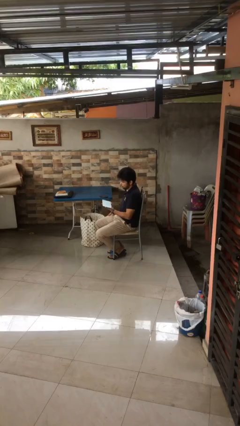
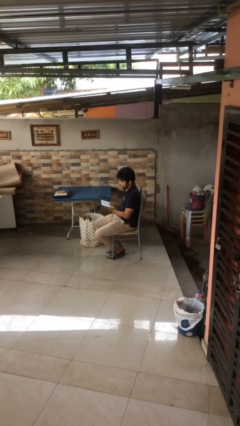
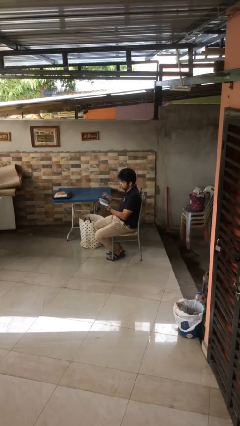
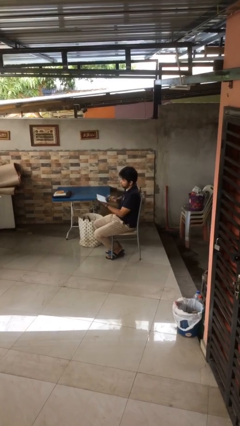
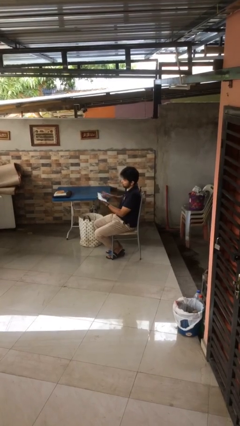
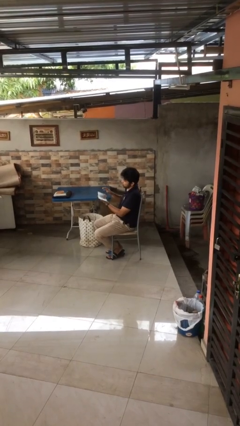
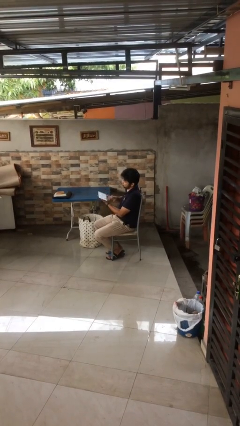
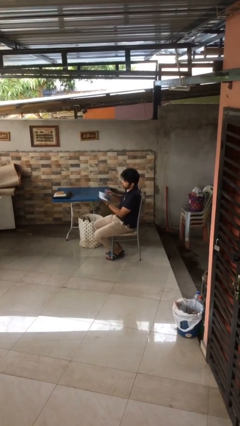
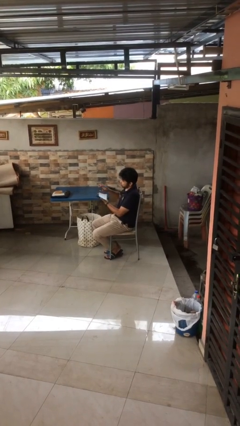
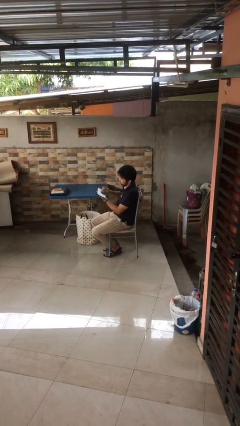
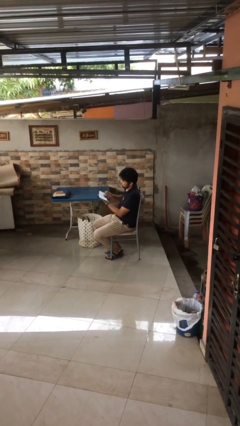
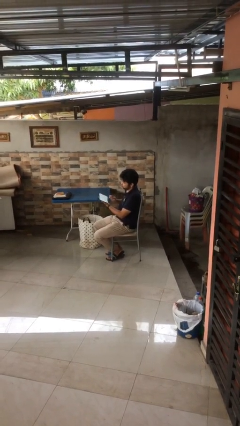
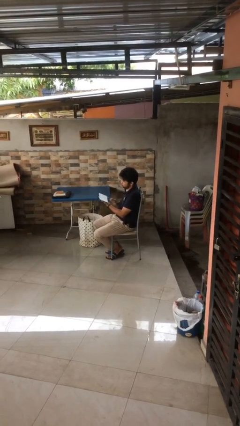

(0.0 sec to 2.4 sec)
person interacts with tablet

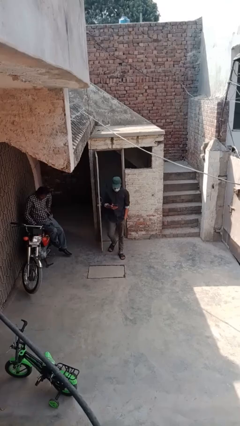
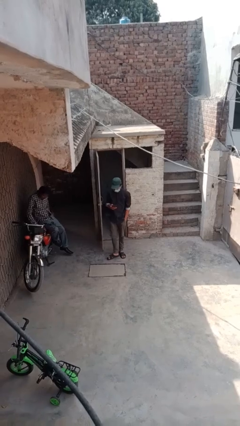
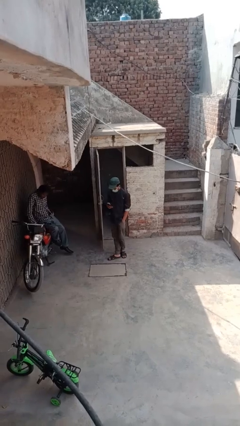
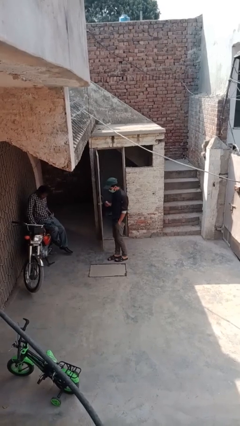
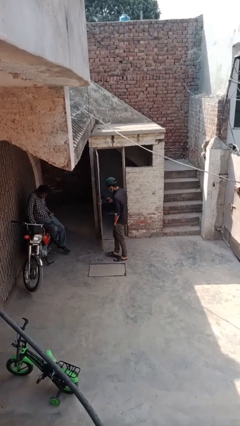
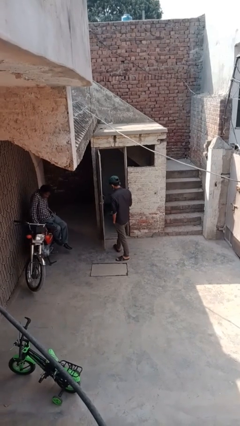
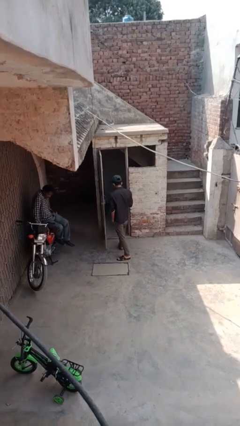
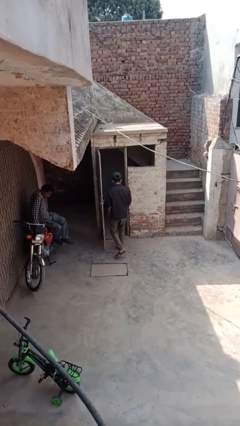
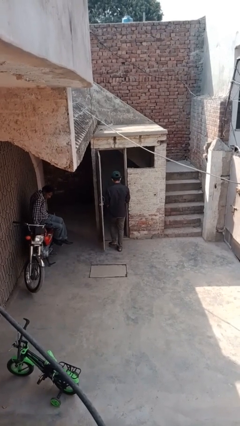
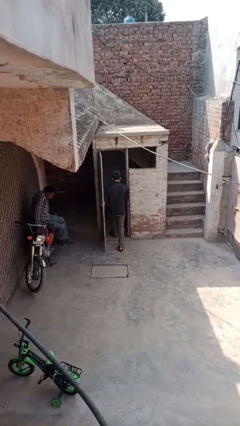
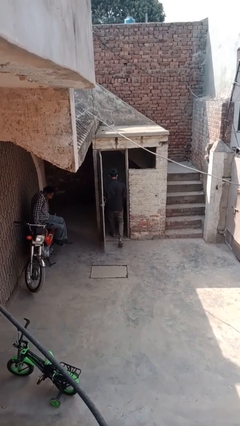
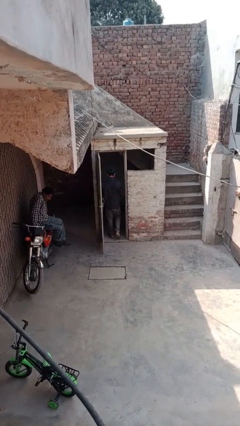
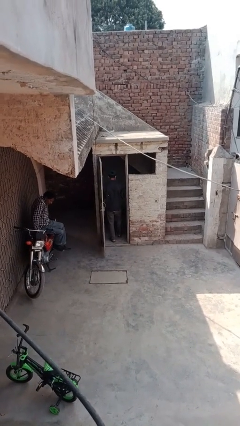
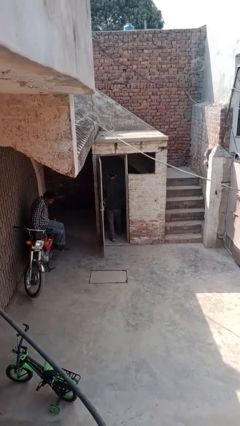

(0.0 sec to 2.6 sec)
person exits scene through structure

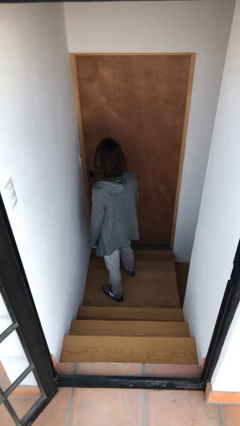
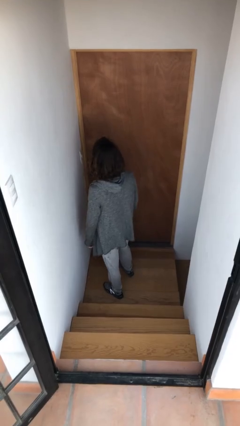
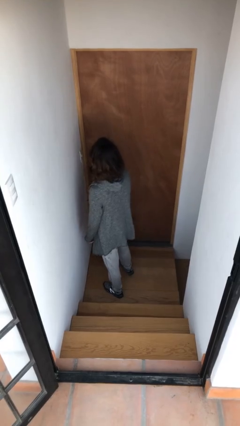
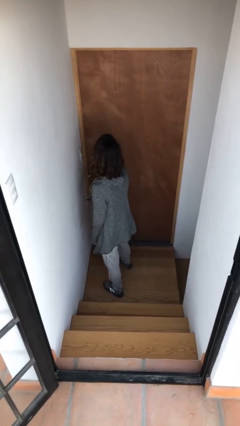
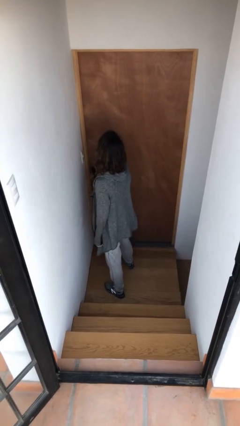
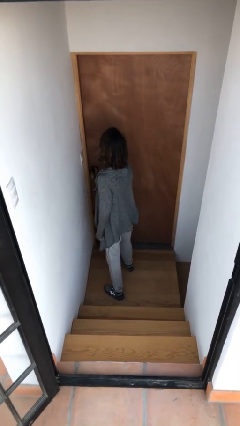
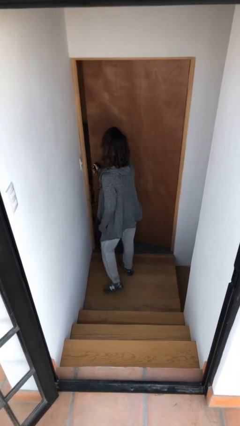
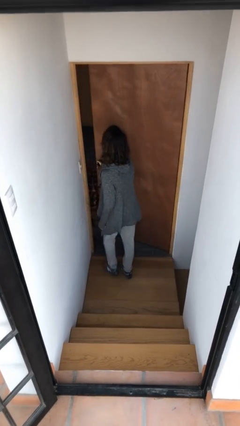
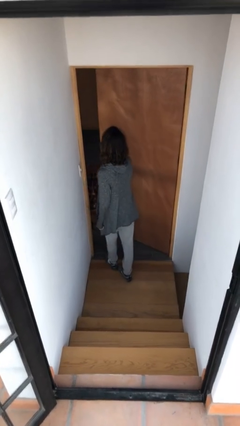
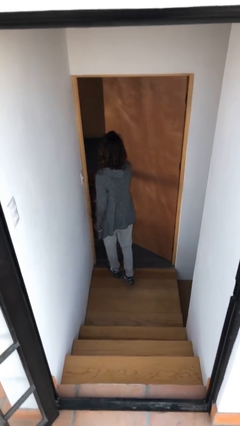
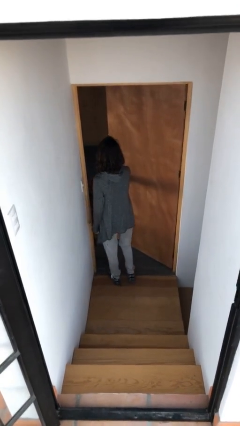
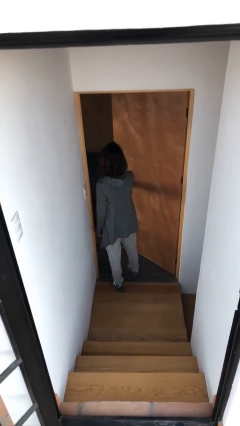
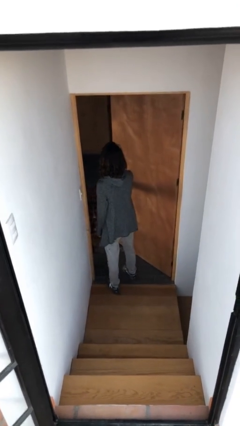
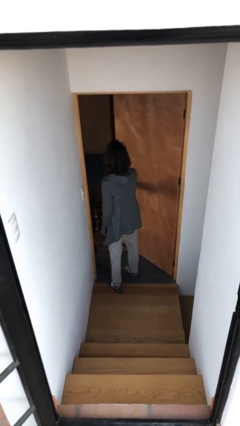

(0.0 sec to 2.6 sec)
person opens facility door

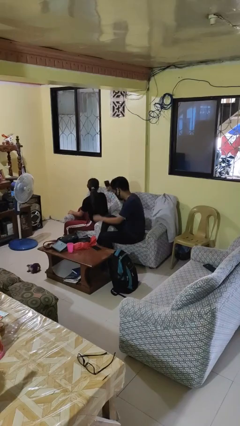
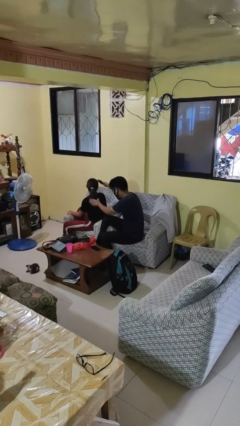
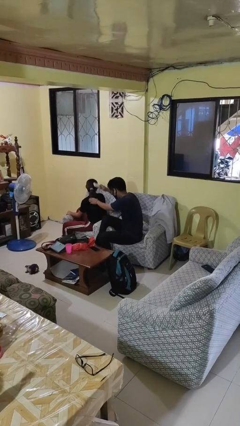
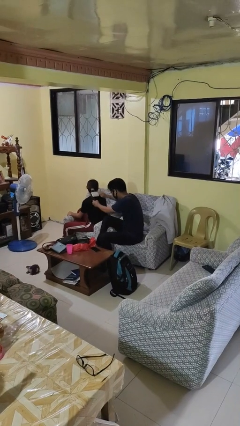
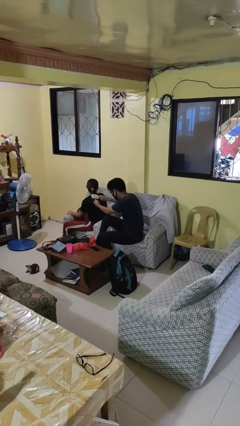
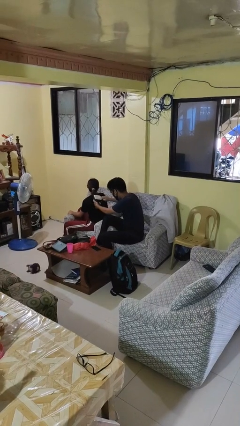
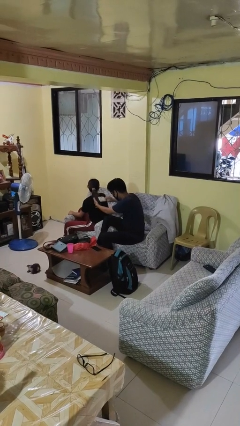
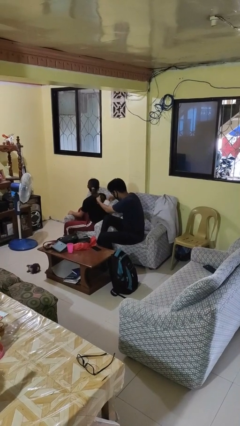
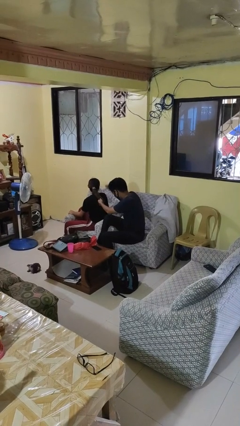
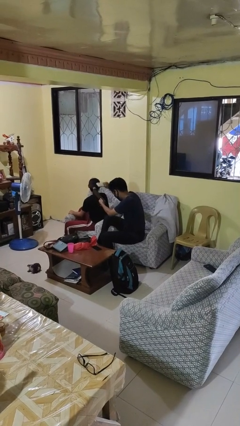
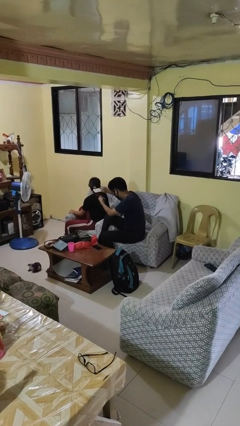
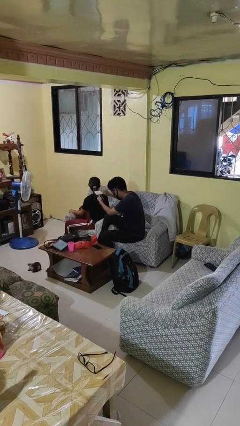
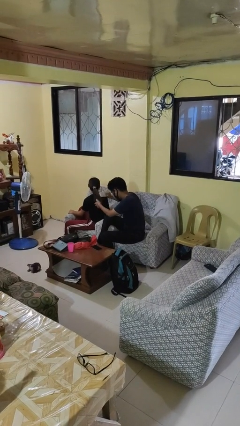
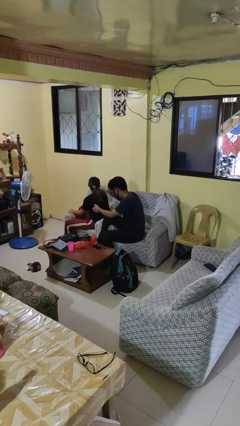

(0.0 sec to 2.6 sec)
person brushes hair of person

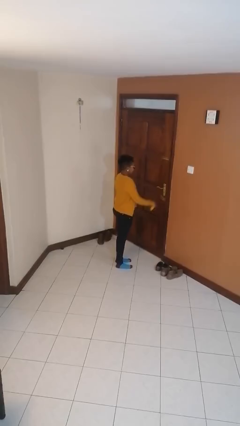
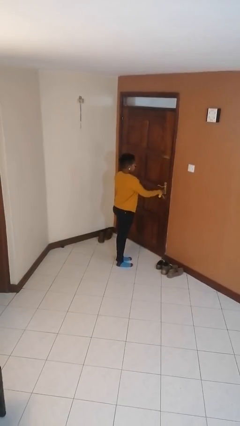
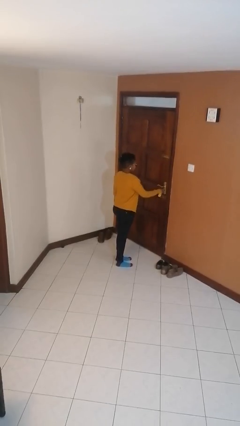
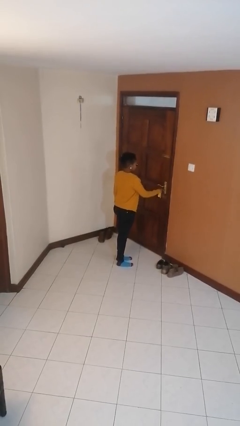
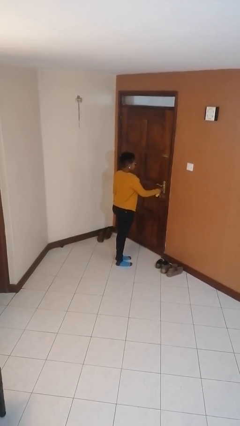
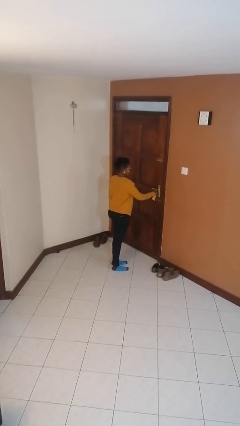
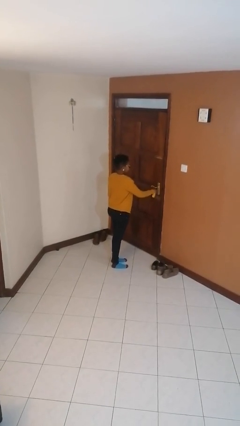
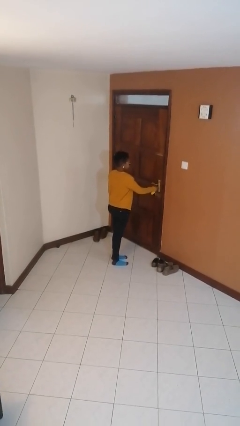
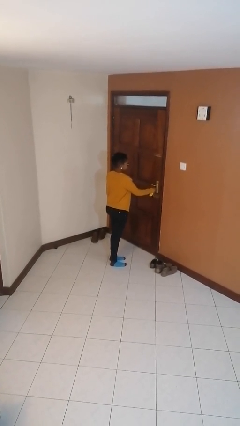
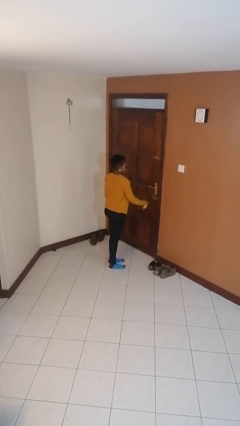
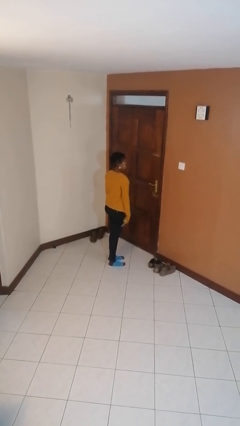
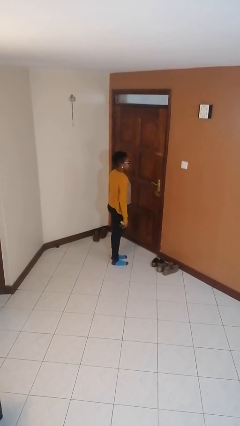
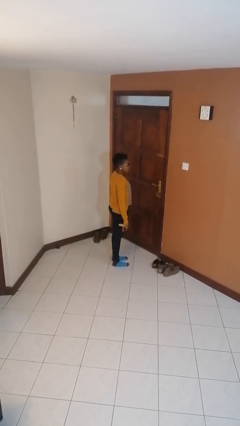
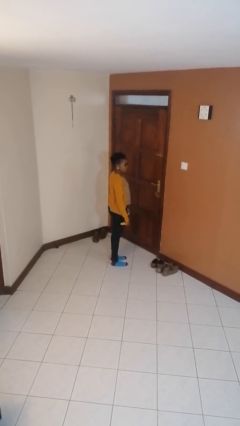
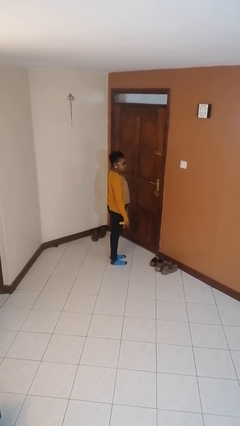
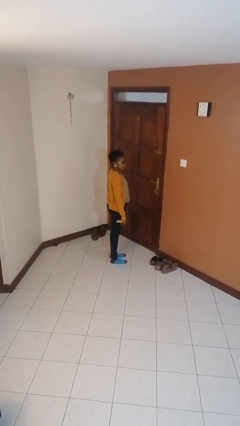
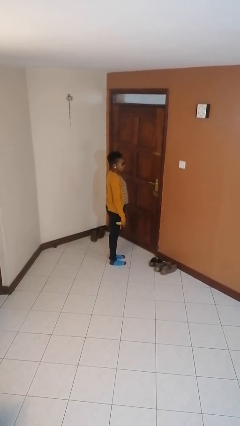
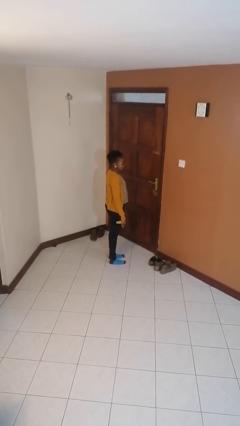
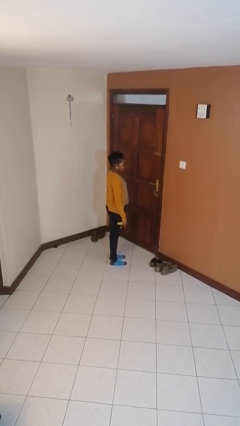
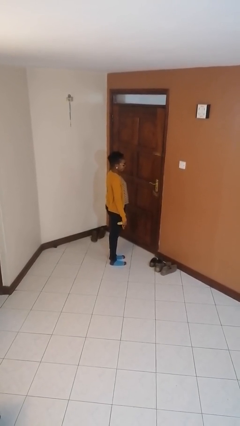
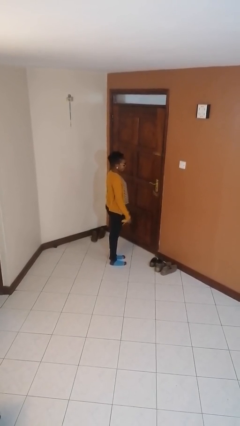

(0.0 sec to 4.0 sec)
person locks door with keys

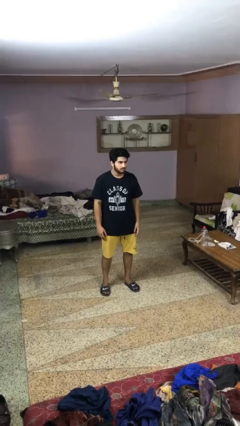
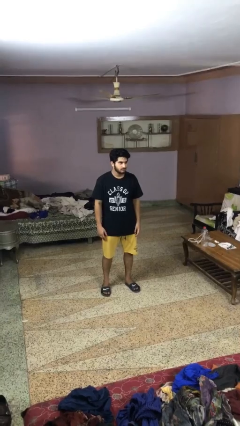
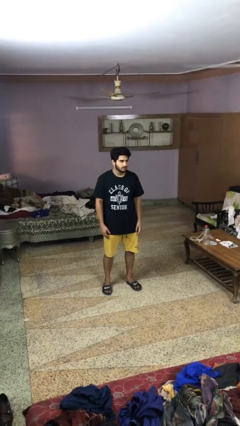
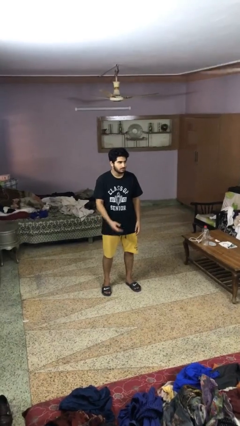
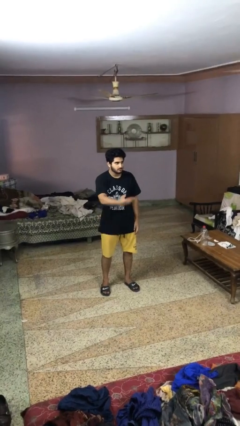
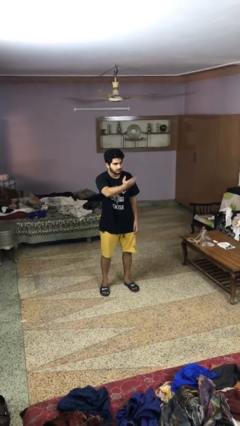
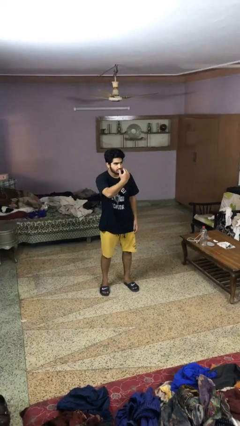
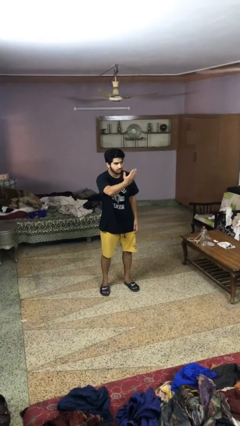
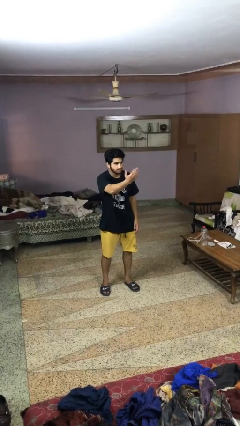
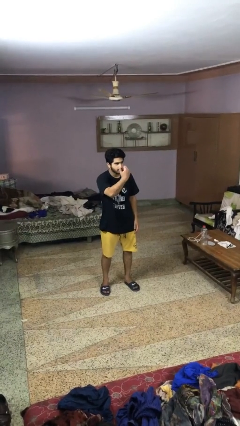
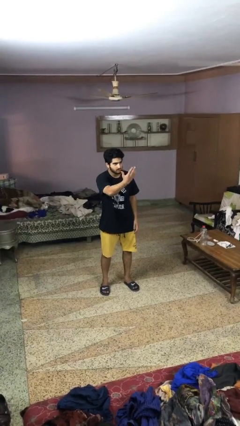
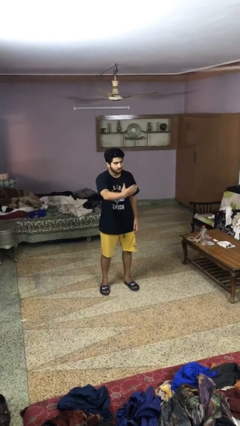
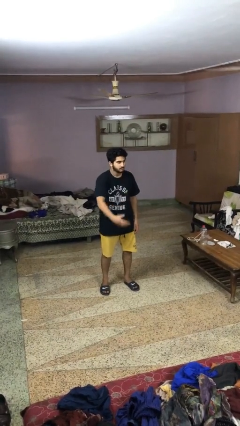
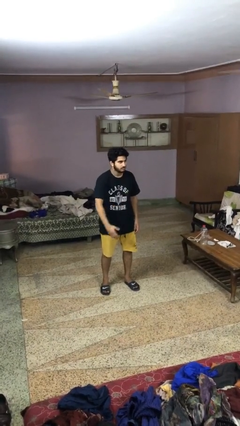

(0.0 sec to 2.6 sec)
person gestures come here

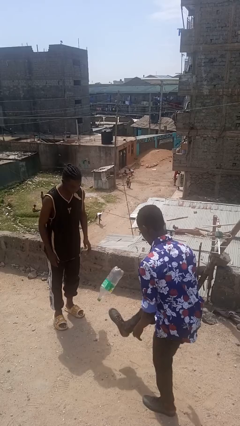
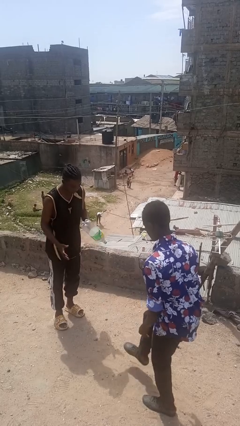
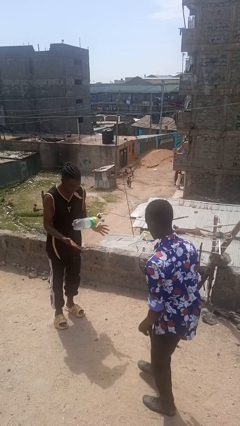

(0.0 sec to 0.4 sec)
person kicks object to person
